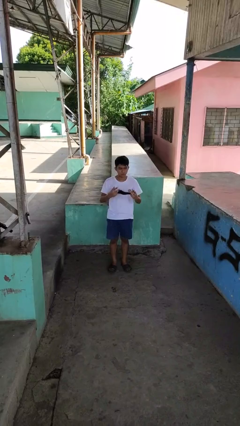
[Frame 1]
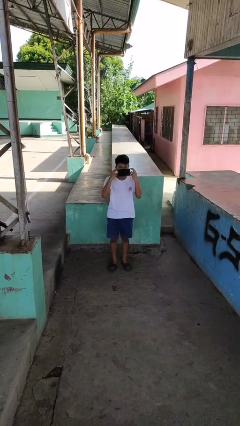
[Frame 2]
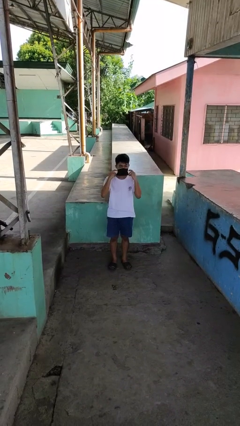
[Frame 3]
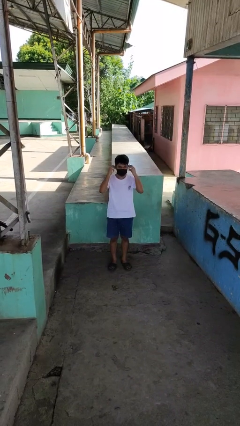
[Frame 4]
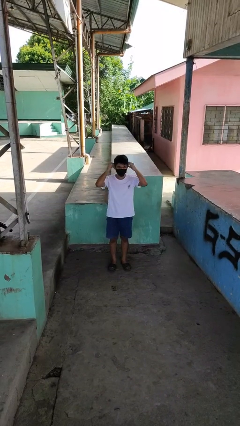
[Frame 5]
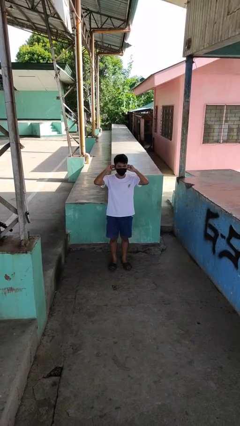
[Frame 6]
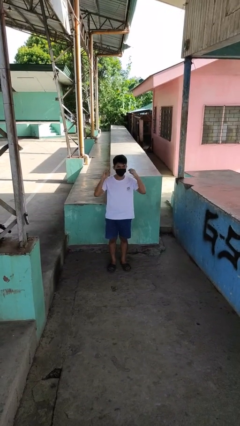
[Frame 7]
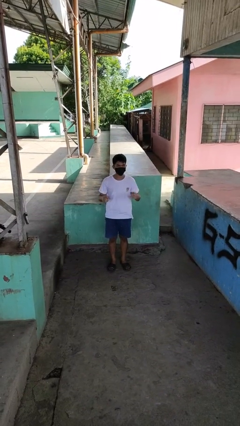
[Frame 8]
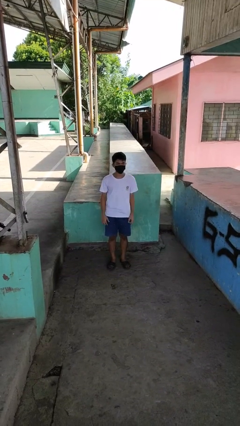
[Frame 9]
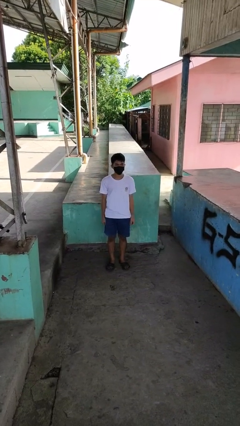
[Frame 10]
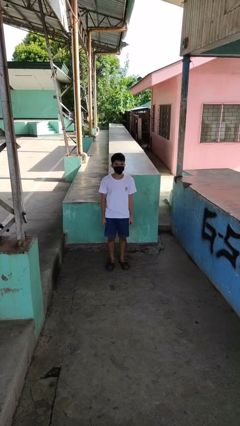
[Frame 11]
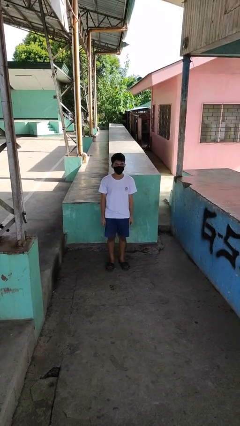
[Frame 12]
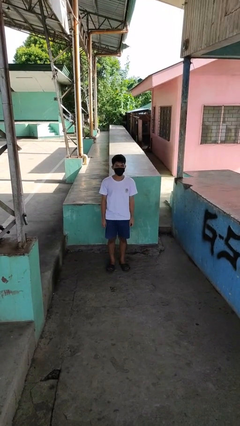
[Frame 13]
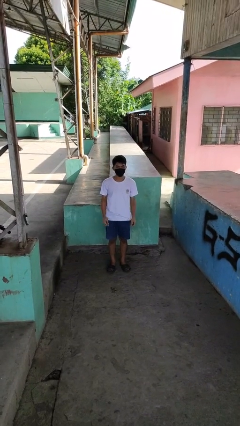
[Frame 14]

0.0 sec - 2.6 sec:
person puts on facemask

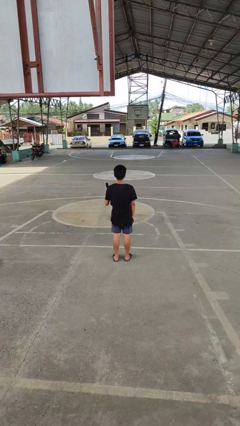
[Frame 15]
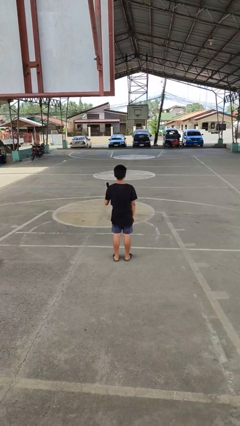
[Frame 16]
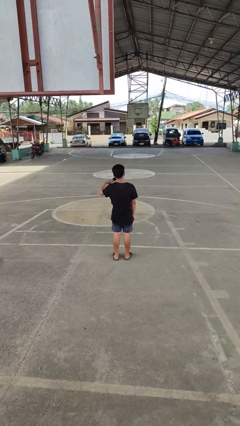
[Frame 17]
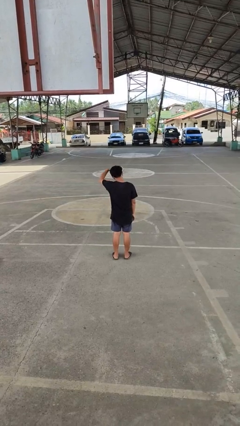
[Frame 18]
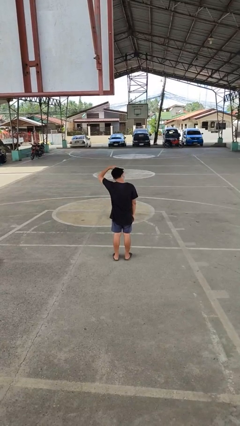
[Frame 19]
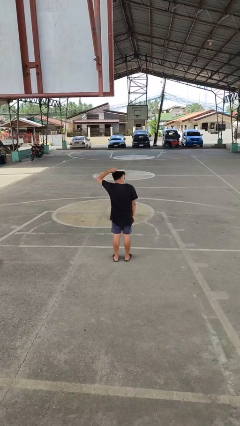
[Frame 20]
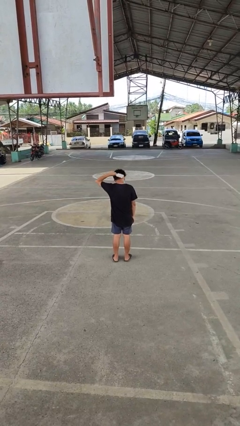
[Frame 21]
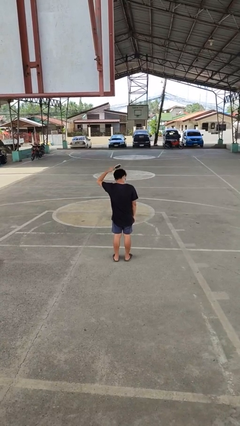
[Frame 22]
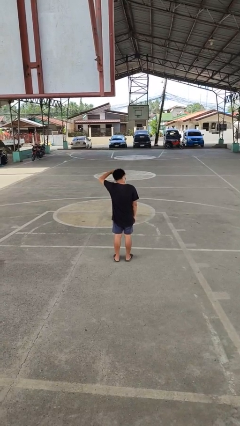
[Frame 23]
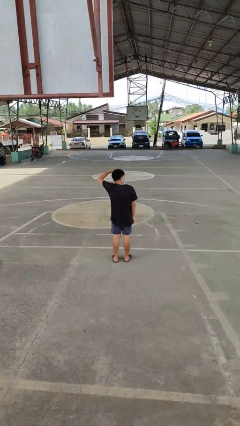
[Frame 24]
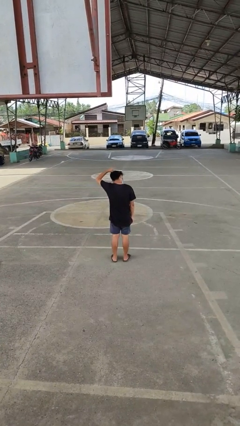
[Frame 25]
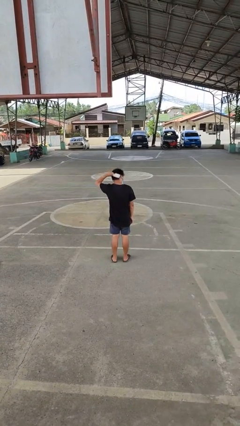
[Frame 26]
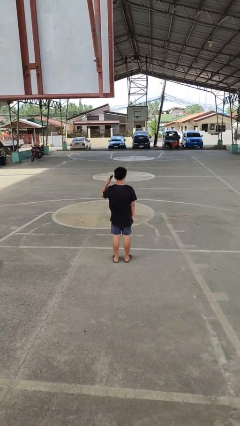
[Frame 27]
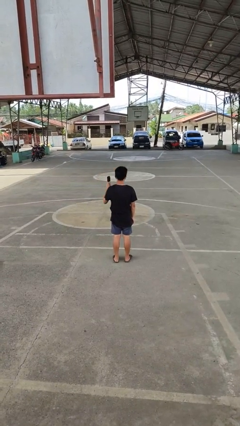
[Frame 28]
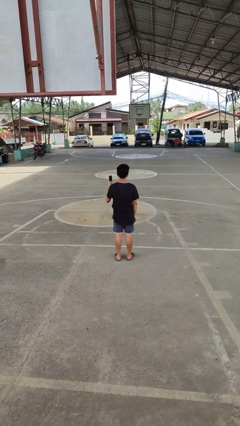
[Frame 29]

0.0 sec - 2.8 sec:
person brushes hair

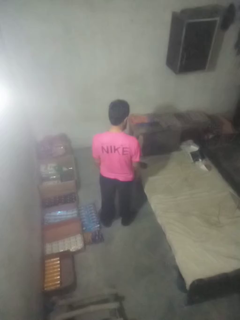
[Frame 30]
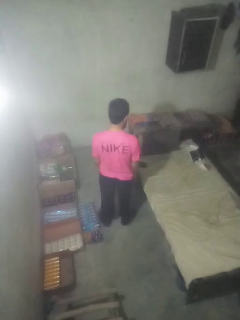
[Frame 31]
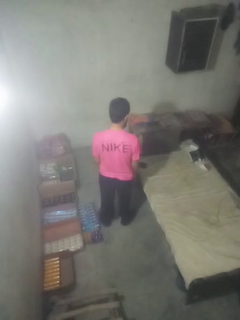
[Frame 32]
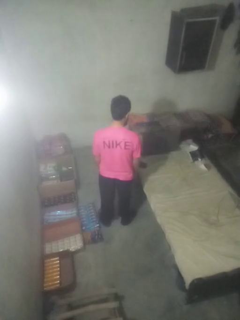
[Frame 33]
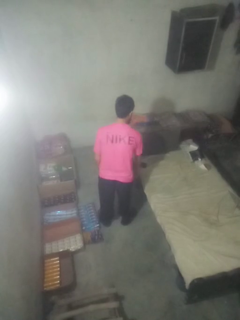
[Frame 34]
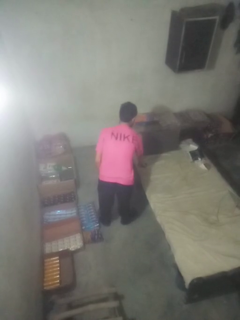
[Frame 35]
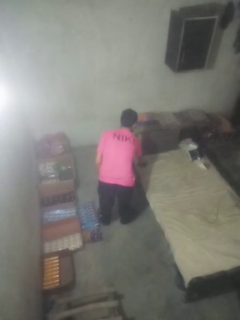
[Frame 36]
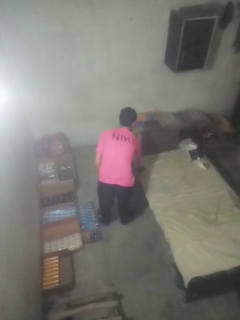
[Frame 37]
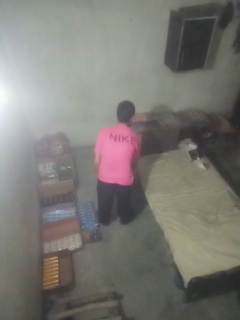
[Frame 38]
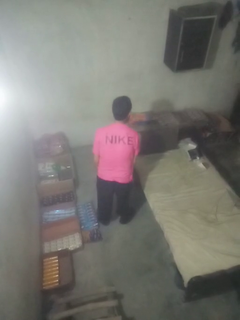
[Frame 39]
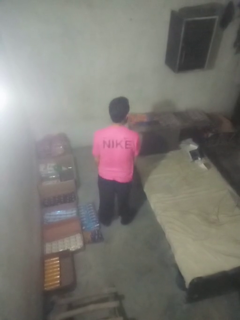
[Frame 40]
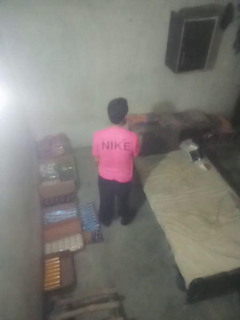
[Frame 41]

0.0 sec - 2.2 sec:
person picks up object from bed

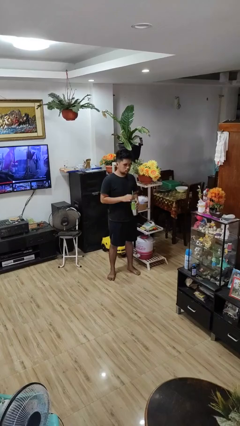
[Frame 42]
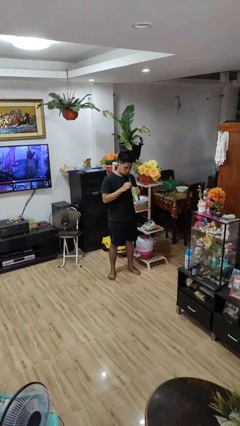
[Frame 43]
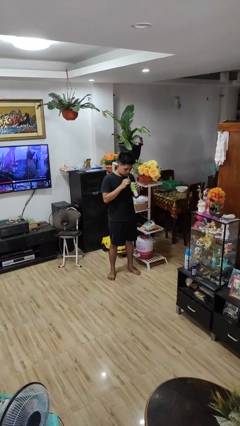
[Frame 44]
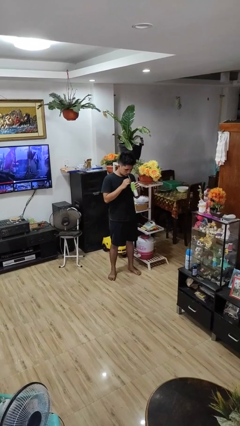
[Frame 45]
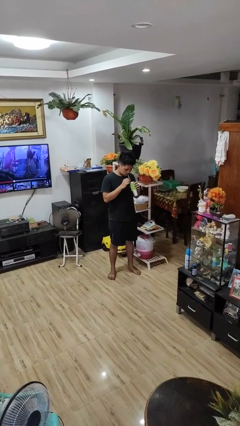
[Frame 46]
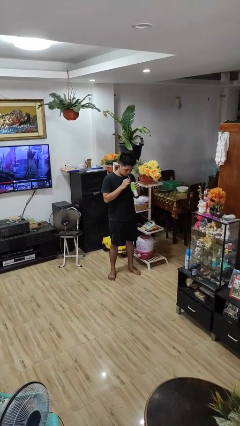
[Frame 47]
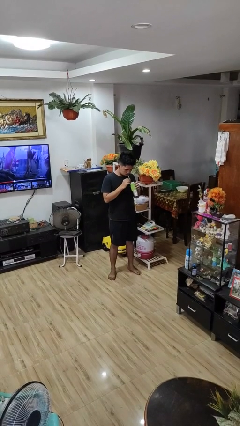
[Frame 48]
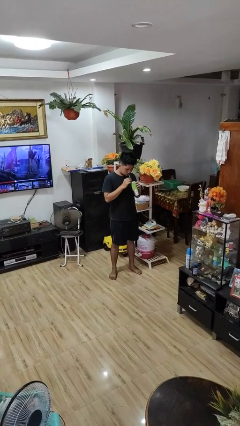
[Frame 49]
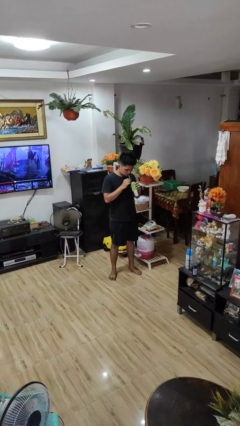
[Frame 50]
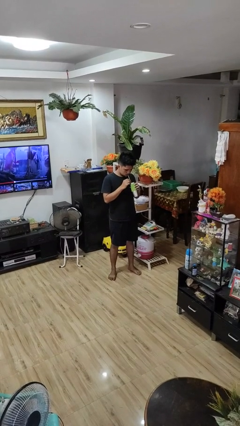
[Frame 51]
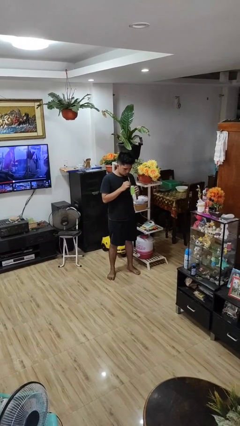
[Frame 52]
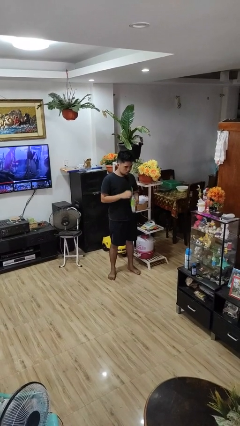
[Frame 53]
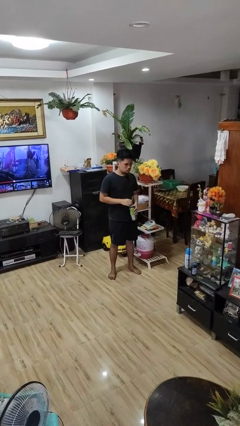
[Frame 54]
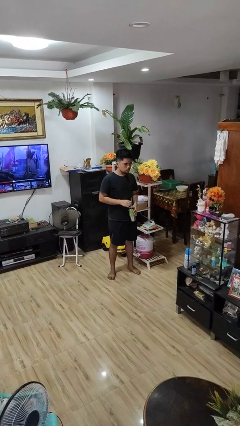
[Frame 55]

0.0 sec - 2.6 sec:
person drinks from straw

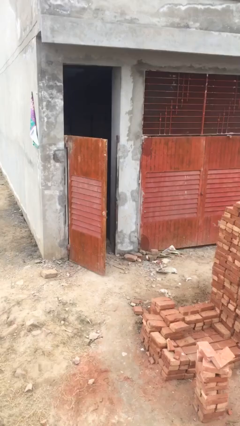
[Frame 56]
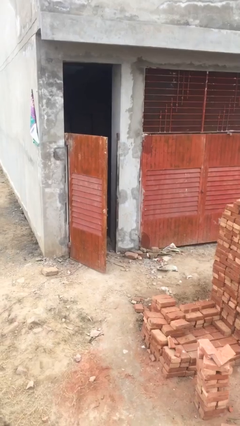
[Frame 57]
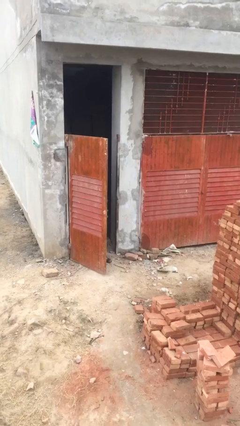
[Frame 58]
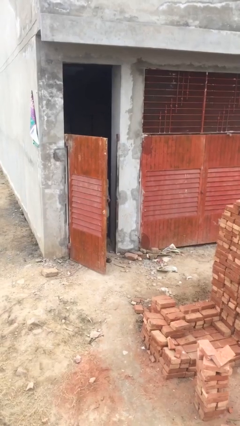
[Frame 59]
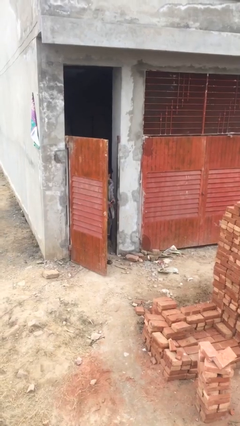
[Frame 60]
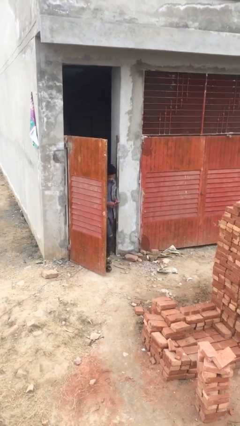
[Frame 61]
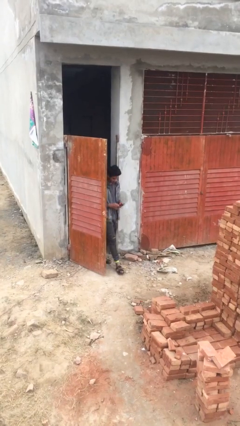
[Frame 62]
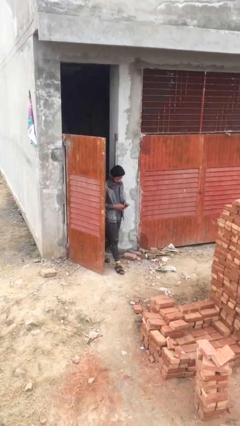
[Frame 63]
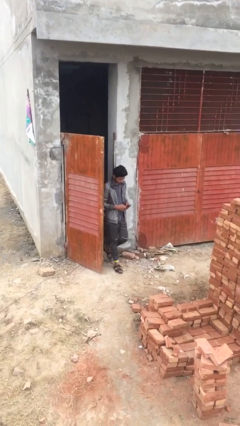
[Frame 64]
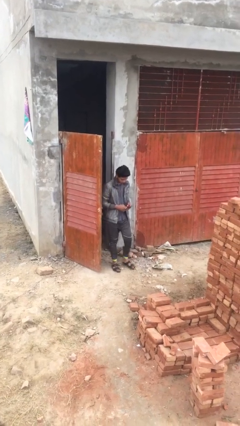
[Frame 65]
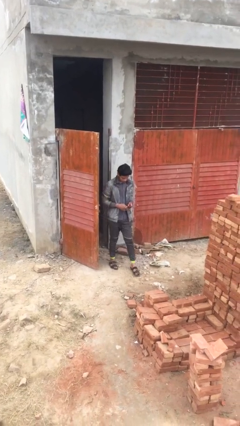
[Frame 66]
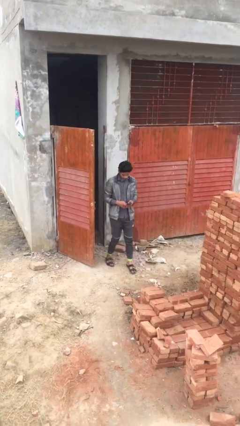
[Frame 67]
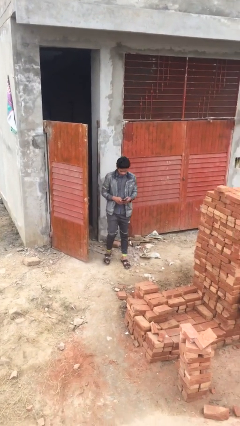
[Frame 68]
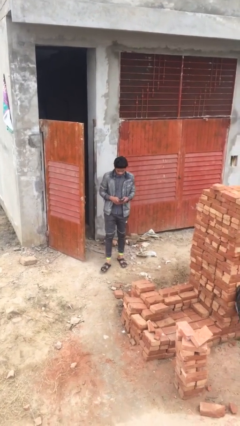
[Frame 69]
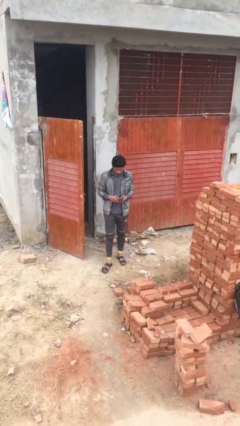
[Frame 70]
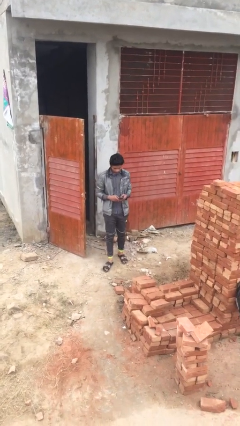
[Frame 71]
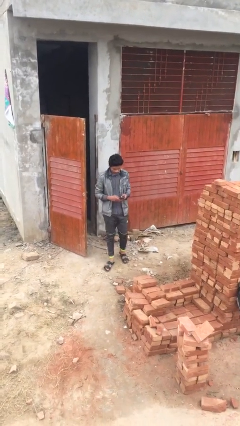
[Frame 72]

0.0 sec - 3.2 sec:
person enters scene through structure

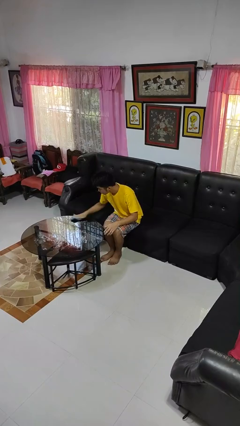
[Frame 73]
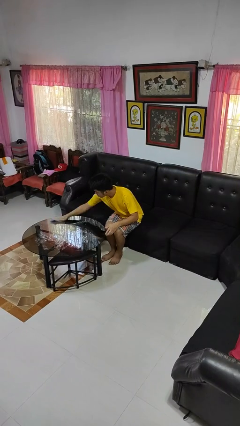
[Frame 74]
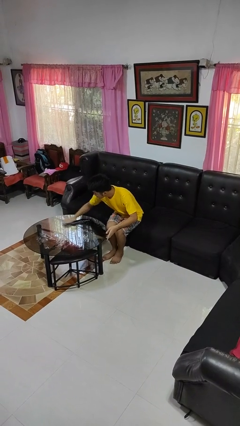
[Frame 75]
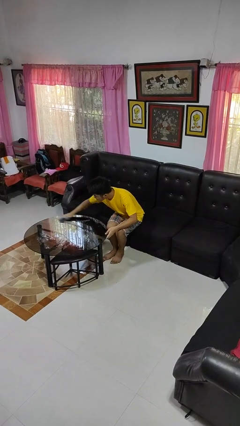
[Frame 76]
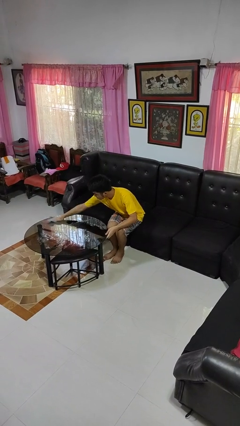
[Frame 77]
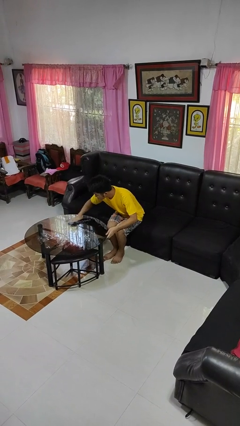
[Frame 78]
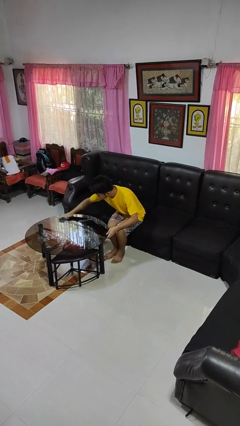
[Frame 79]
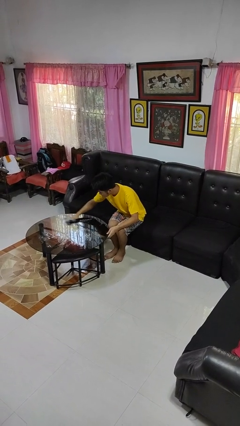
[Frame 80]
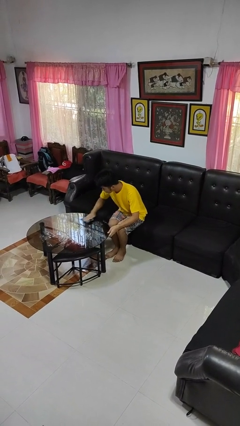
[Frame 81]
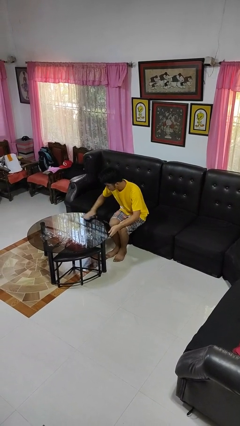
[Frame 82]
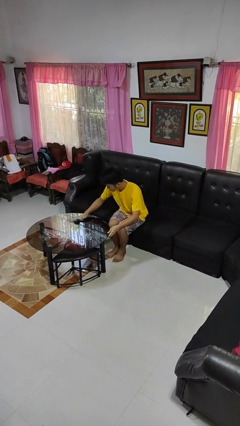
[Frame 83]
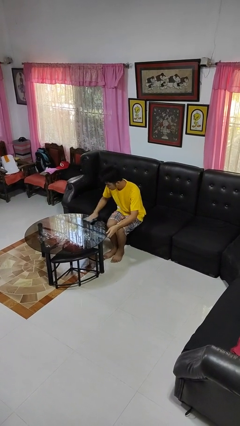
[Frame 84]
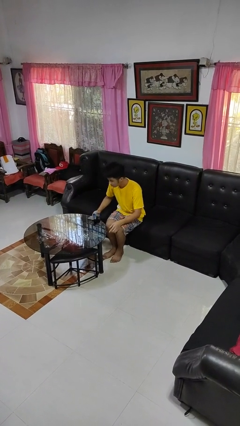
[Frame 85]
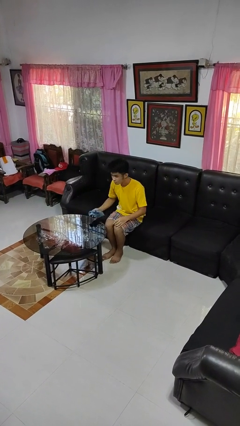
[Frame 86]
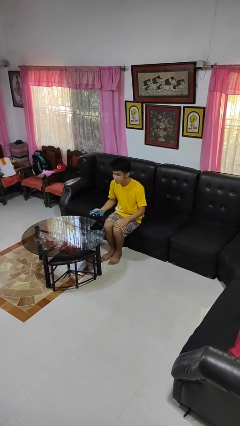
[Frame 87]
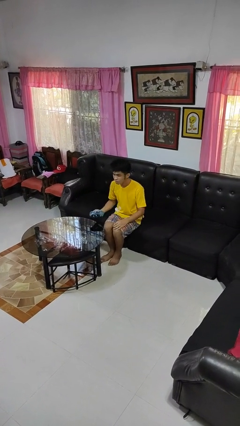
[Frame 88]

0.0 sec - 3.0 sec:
person cleans table with rag

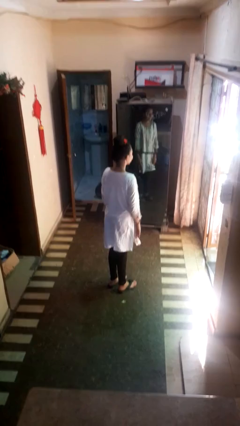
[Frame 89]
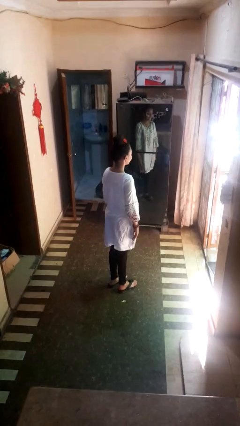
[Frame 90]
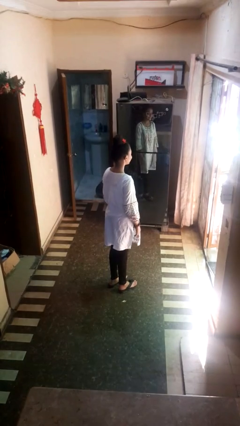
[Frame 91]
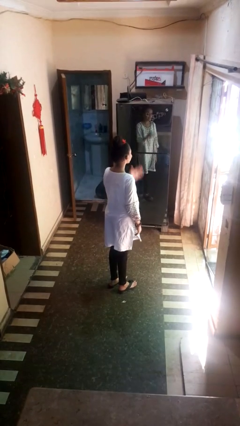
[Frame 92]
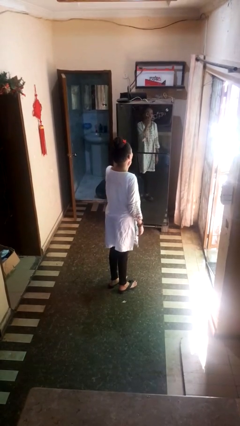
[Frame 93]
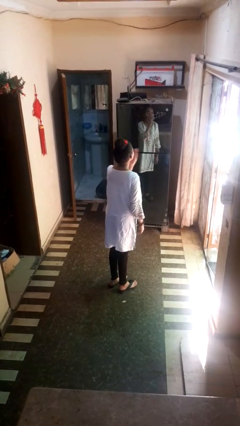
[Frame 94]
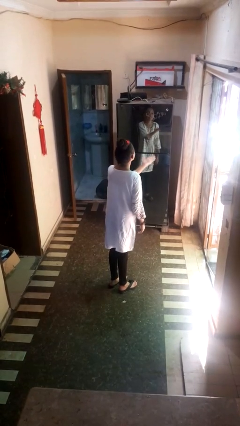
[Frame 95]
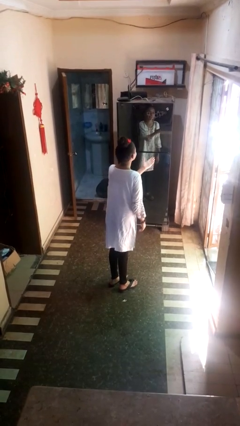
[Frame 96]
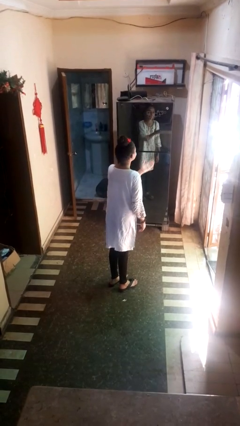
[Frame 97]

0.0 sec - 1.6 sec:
person gestures blow kiss
